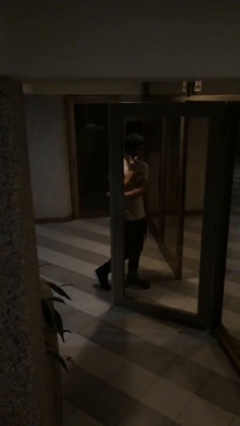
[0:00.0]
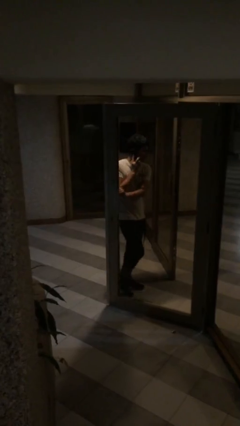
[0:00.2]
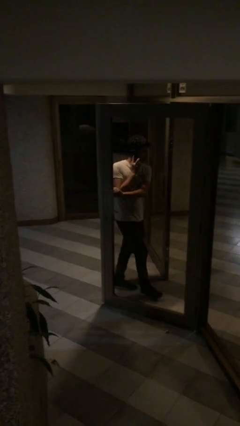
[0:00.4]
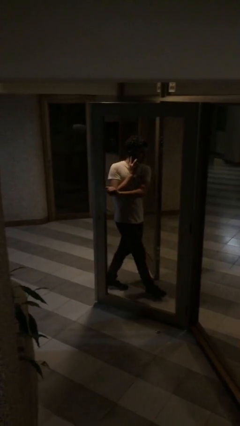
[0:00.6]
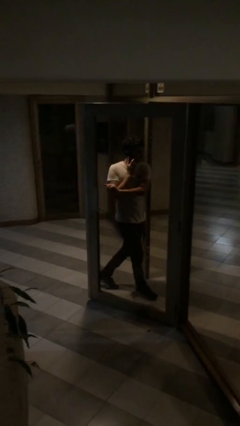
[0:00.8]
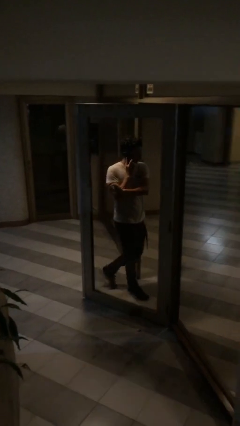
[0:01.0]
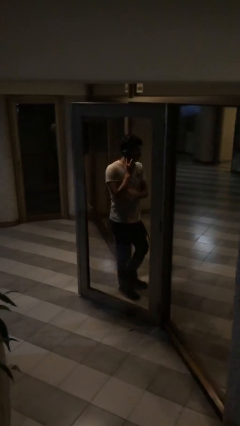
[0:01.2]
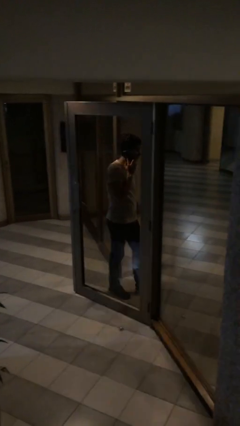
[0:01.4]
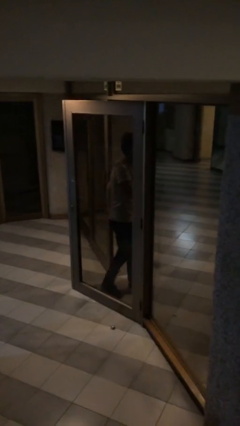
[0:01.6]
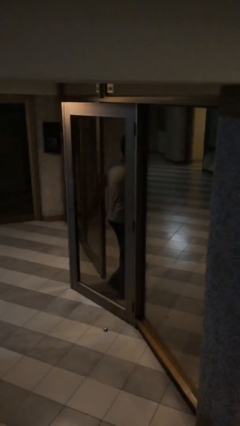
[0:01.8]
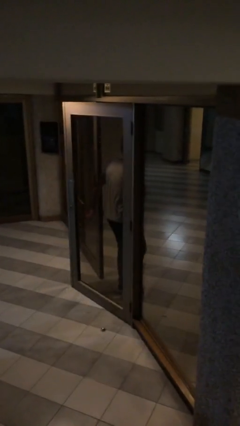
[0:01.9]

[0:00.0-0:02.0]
person exits scene through structure

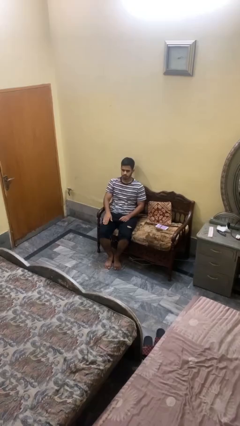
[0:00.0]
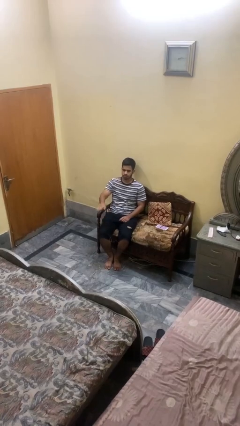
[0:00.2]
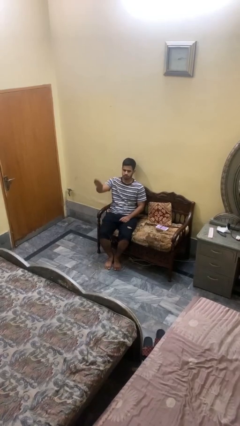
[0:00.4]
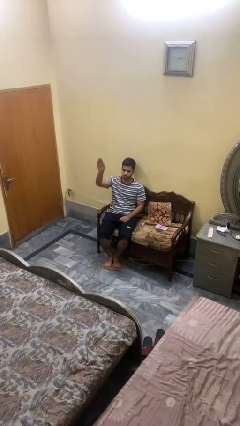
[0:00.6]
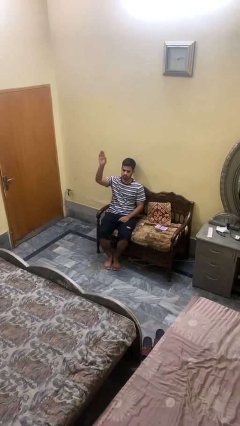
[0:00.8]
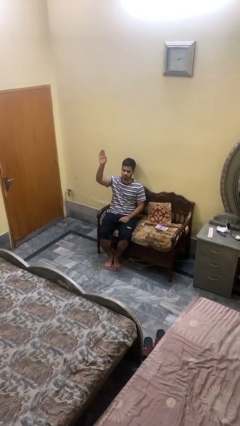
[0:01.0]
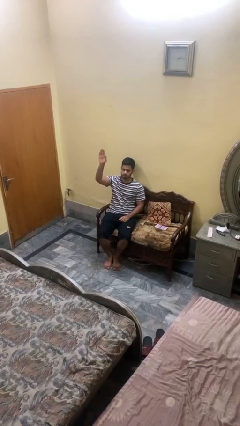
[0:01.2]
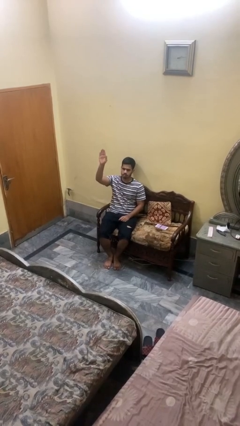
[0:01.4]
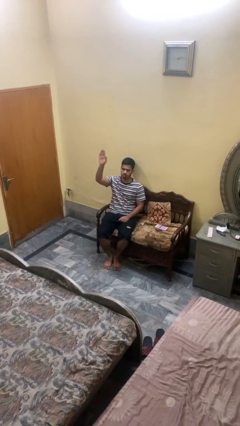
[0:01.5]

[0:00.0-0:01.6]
person gestures raise hand

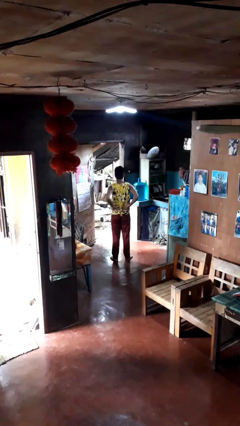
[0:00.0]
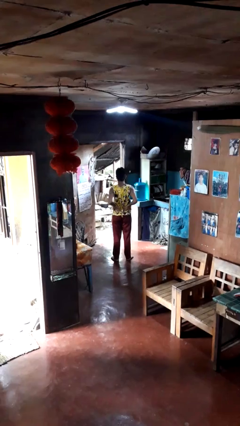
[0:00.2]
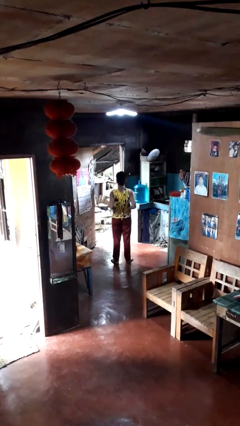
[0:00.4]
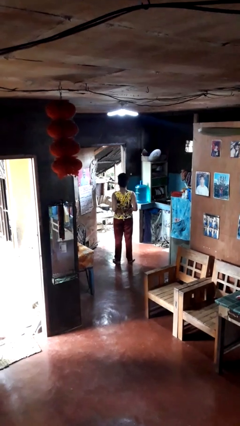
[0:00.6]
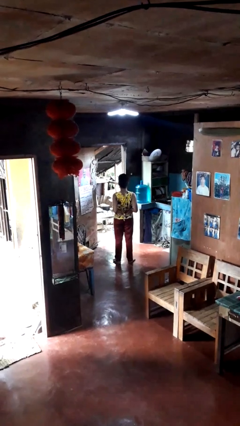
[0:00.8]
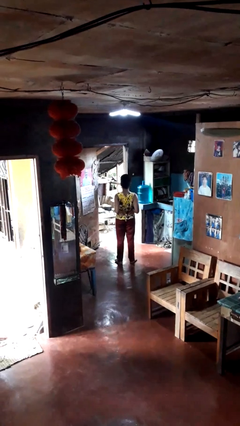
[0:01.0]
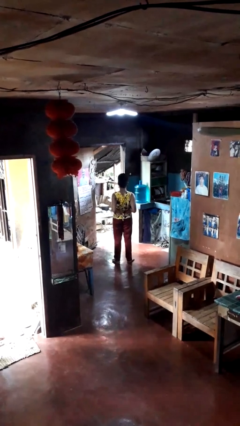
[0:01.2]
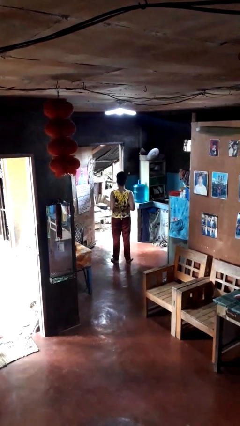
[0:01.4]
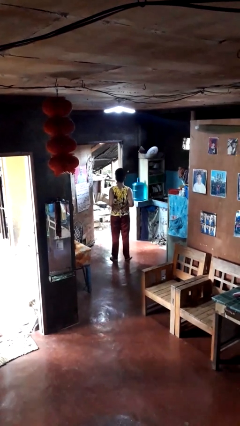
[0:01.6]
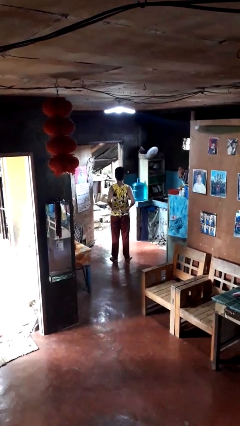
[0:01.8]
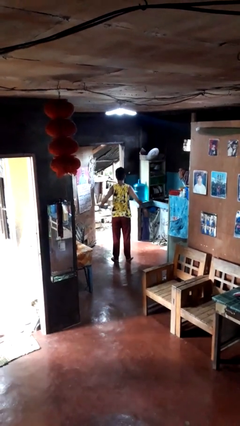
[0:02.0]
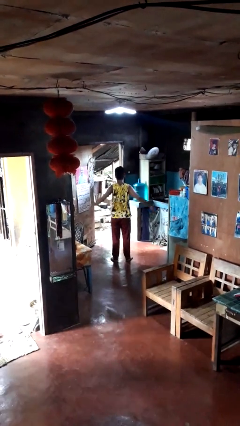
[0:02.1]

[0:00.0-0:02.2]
person stretches back

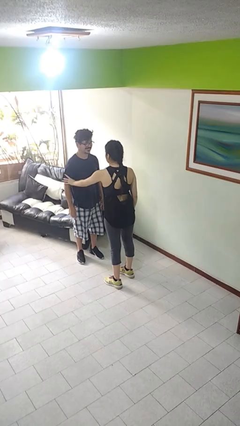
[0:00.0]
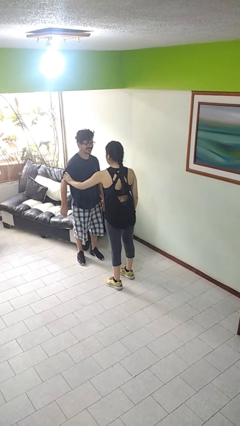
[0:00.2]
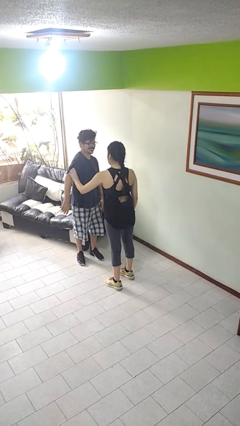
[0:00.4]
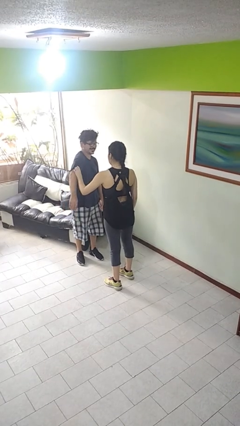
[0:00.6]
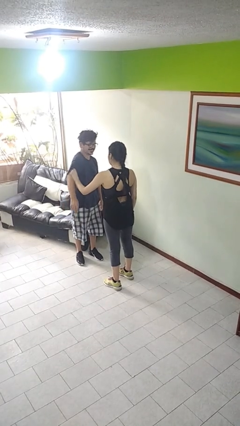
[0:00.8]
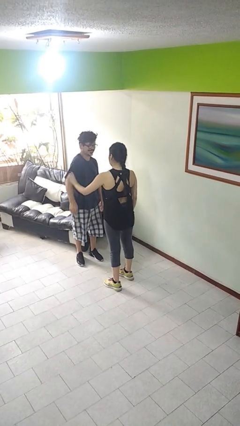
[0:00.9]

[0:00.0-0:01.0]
person grabs person by bicep

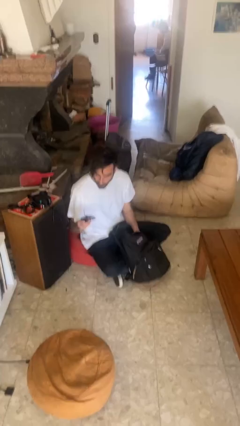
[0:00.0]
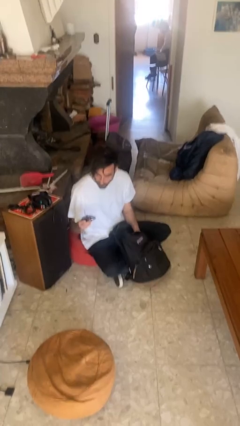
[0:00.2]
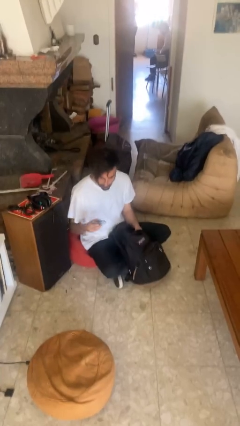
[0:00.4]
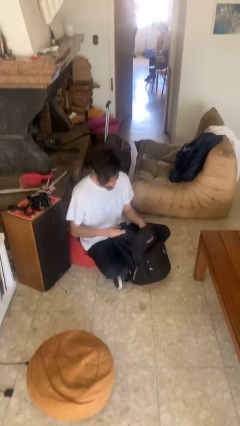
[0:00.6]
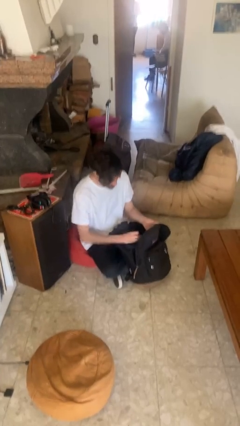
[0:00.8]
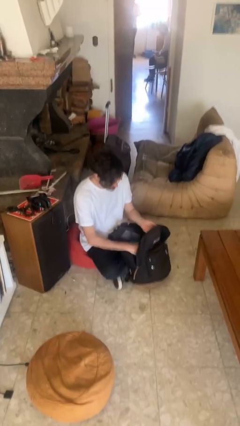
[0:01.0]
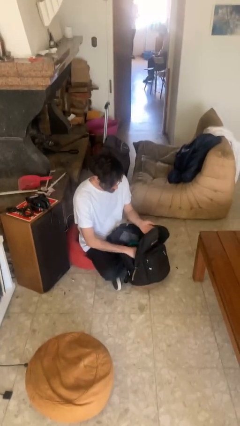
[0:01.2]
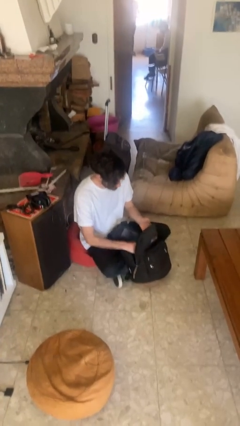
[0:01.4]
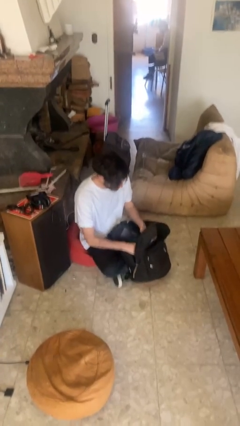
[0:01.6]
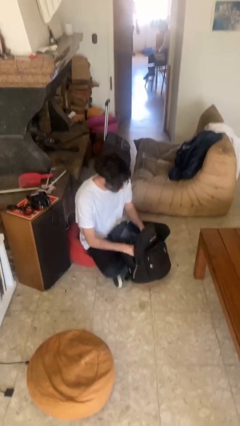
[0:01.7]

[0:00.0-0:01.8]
person puts object into backpack

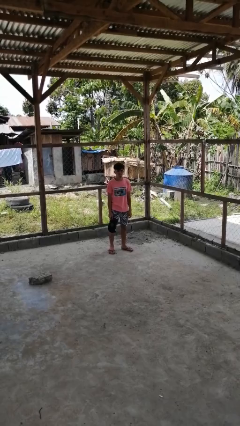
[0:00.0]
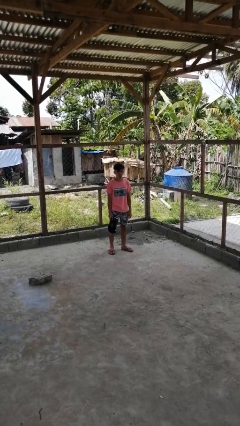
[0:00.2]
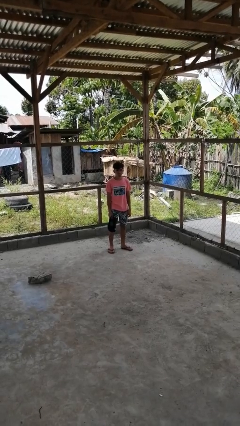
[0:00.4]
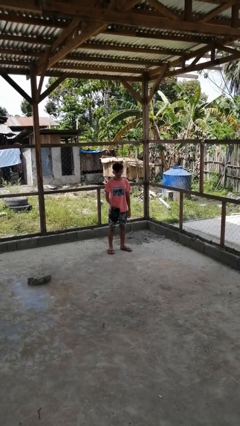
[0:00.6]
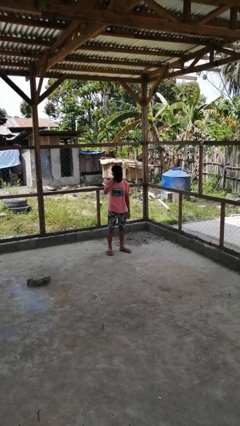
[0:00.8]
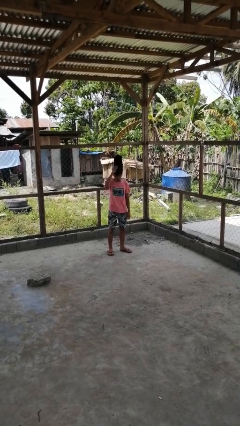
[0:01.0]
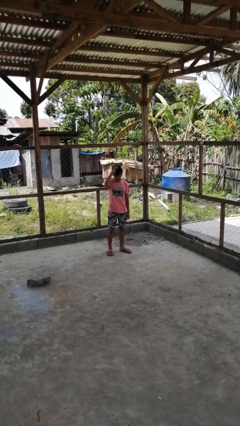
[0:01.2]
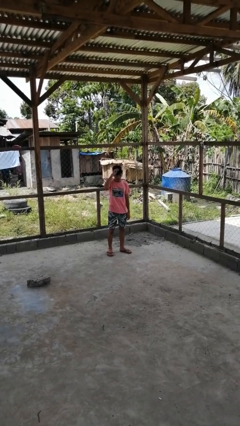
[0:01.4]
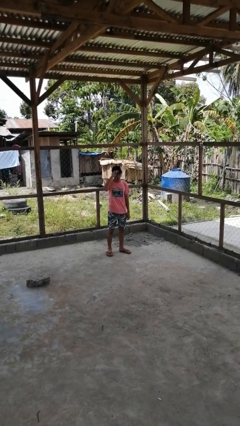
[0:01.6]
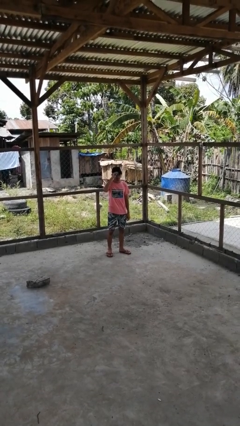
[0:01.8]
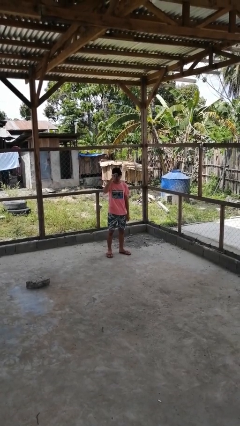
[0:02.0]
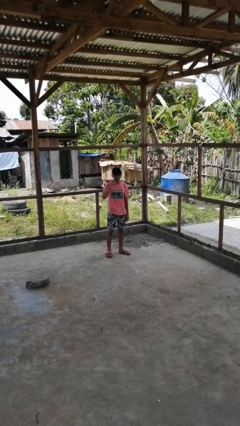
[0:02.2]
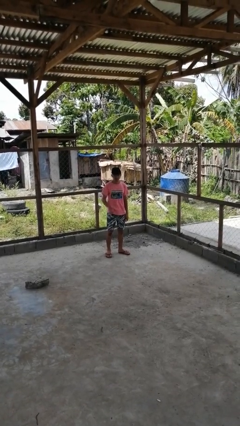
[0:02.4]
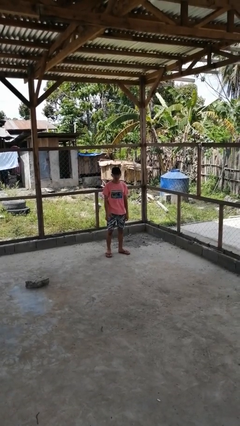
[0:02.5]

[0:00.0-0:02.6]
person puts on hat

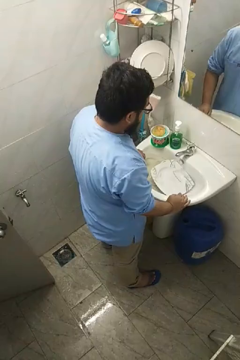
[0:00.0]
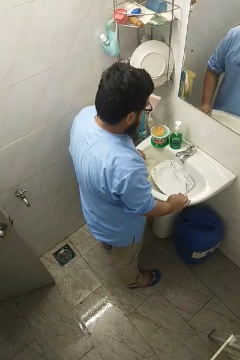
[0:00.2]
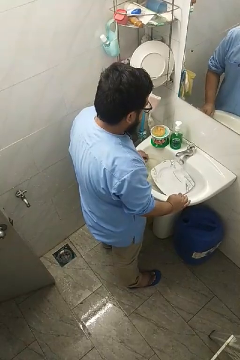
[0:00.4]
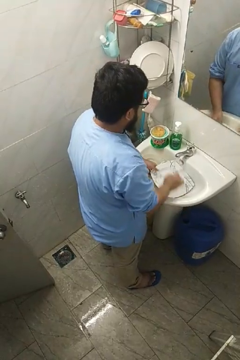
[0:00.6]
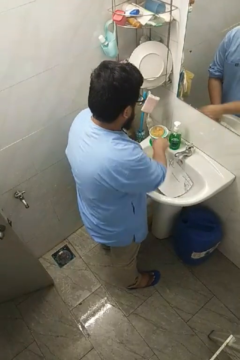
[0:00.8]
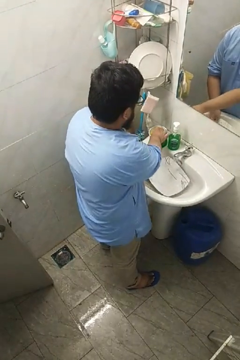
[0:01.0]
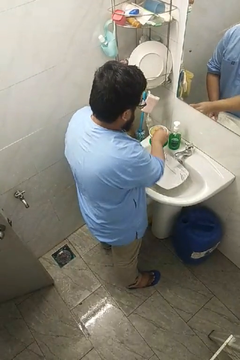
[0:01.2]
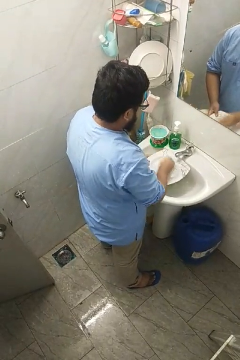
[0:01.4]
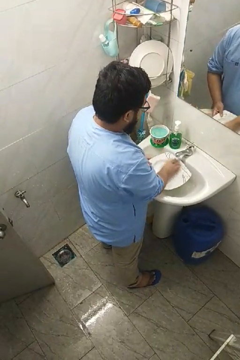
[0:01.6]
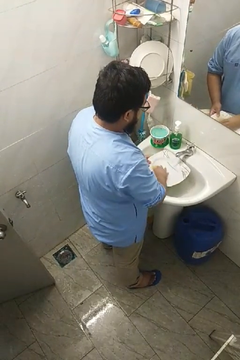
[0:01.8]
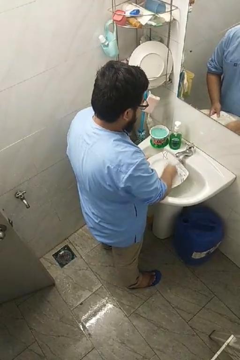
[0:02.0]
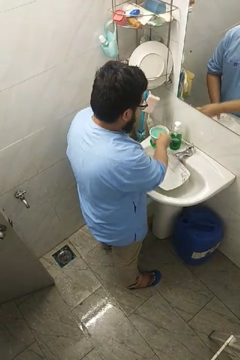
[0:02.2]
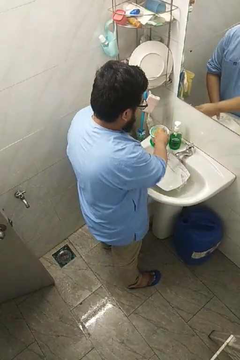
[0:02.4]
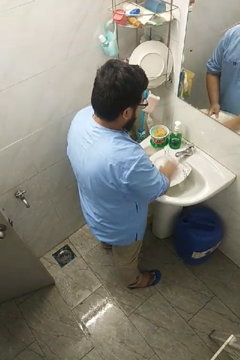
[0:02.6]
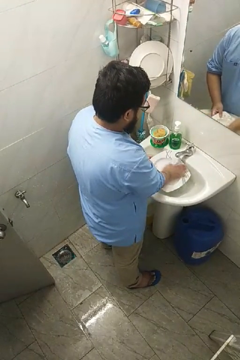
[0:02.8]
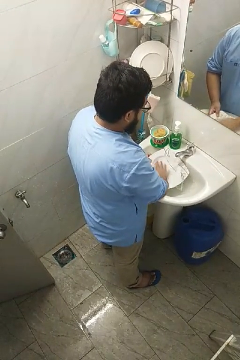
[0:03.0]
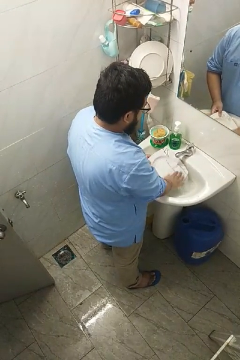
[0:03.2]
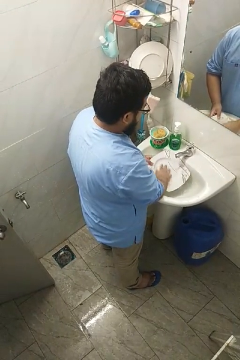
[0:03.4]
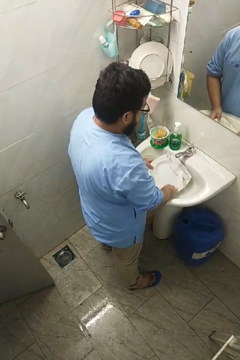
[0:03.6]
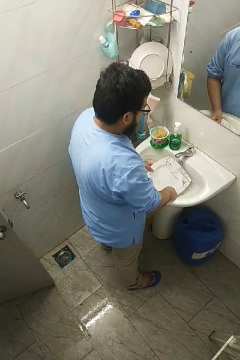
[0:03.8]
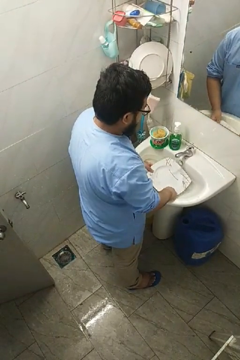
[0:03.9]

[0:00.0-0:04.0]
person washes dish

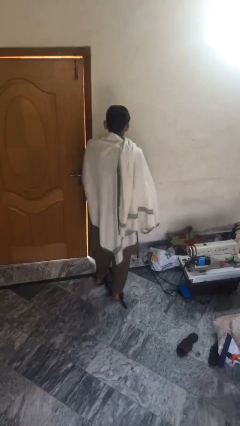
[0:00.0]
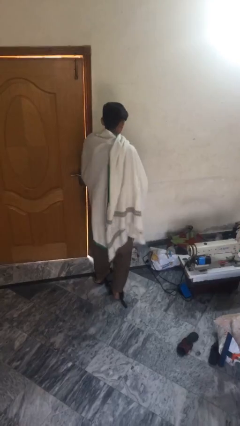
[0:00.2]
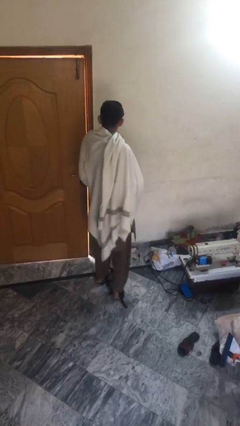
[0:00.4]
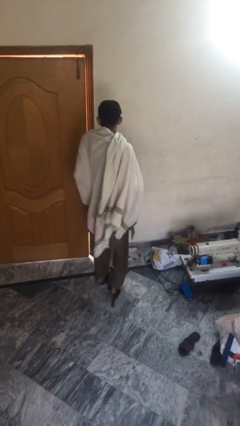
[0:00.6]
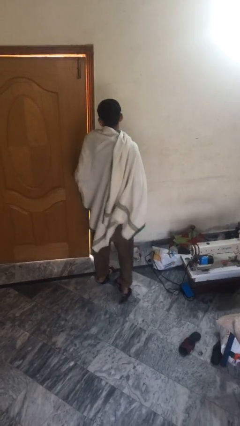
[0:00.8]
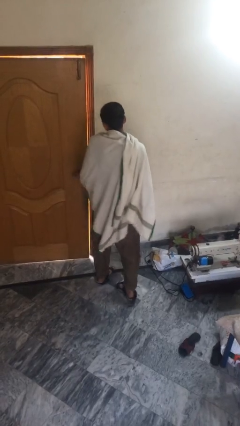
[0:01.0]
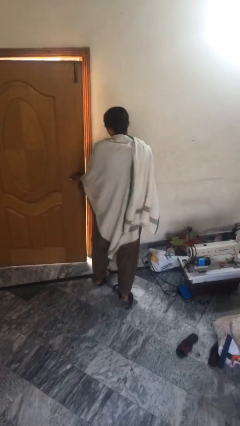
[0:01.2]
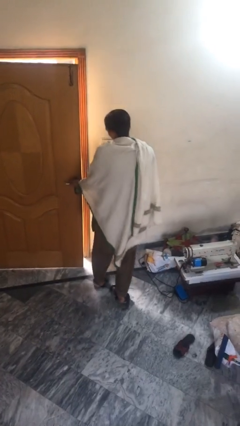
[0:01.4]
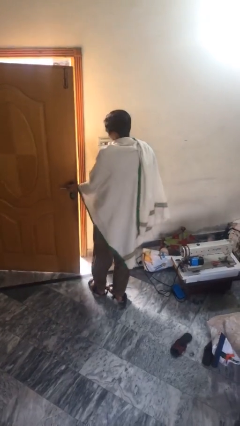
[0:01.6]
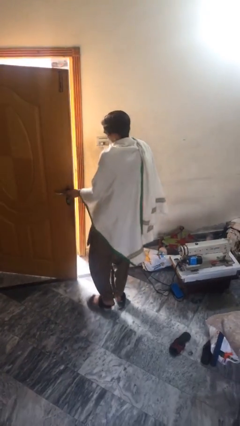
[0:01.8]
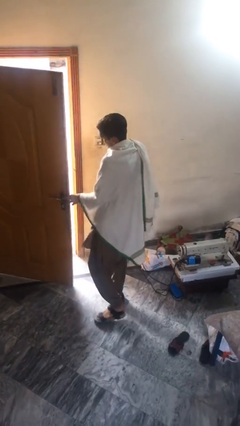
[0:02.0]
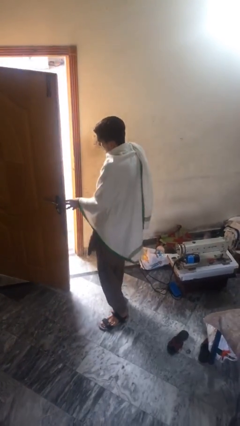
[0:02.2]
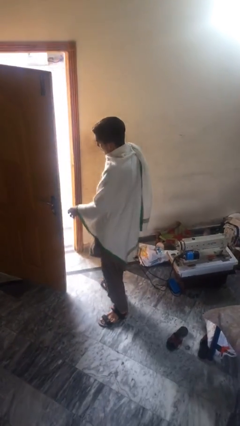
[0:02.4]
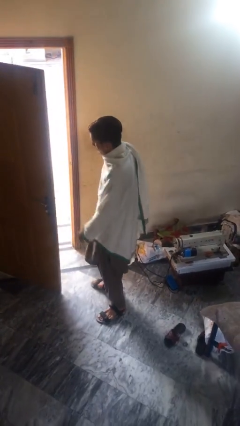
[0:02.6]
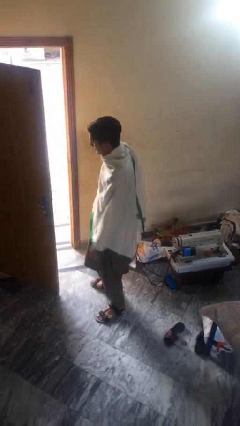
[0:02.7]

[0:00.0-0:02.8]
person opens facility door
